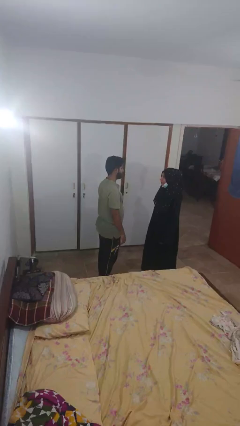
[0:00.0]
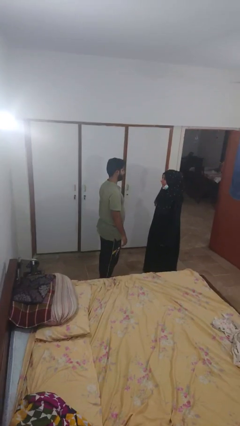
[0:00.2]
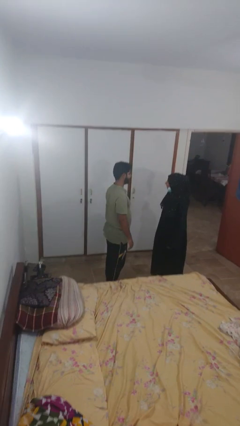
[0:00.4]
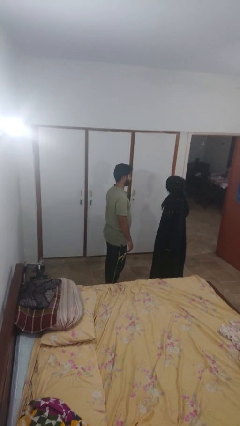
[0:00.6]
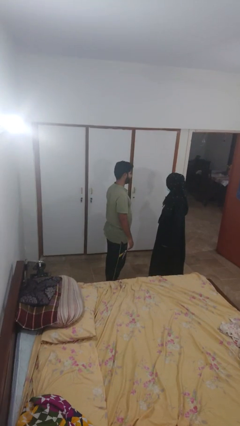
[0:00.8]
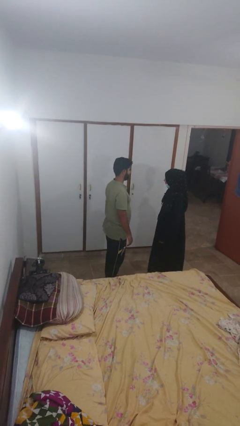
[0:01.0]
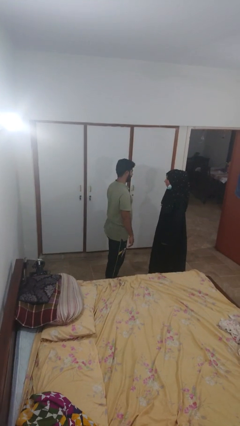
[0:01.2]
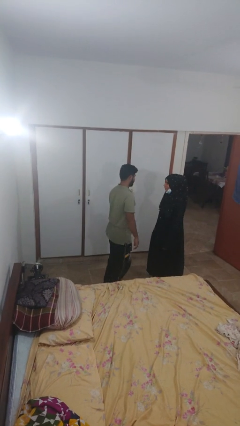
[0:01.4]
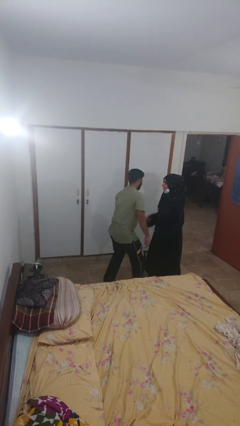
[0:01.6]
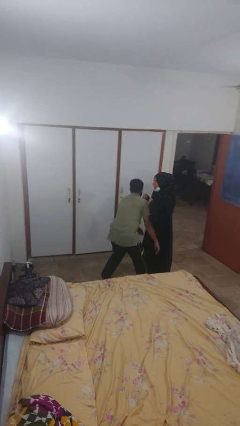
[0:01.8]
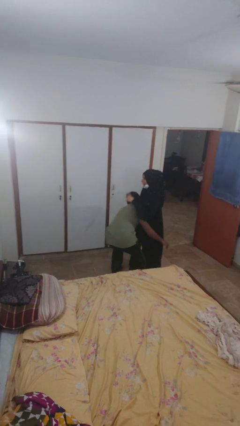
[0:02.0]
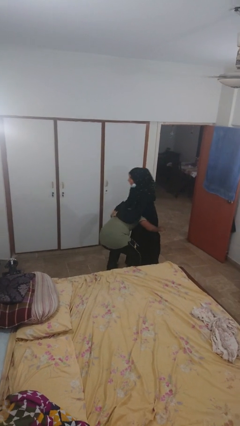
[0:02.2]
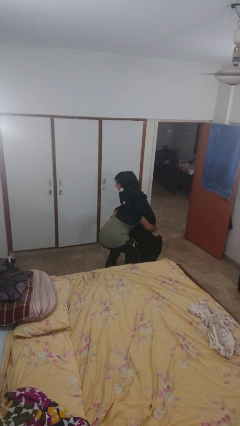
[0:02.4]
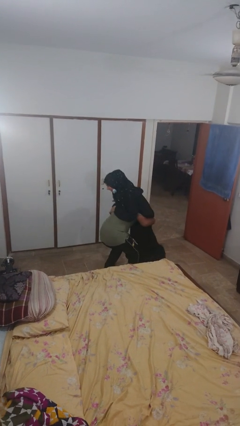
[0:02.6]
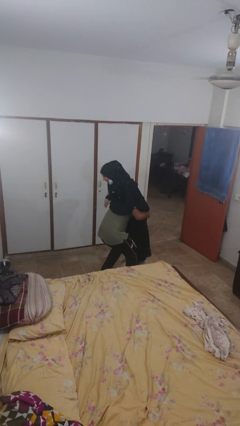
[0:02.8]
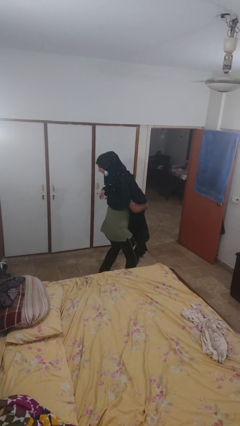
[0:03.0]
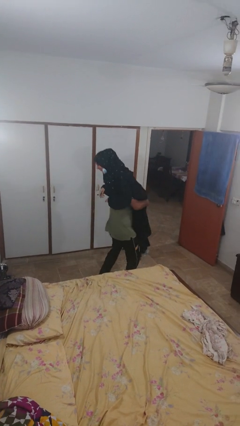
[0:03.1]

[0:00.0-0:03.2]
person carries person over shoulder

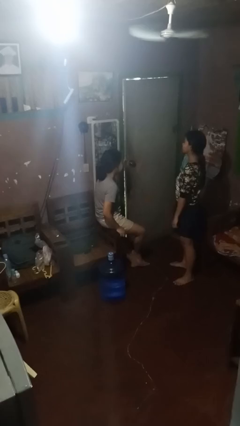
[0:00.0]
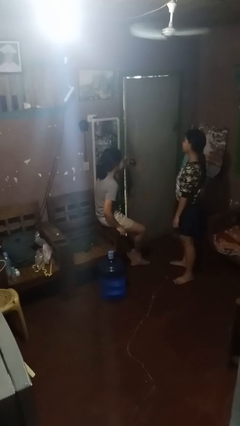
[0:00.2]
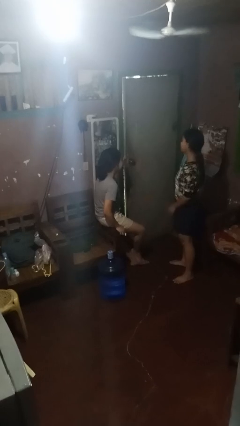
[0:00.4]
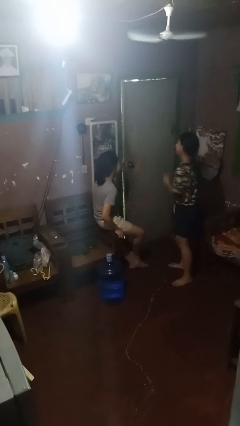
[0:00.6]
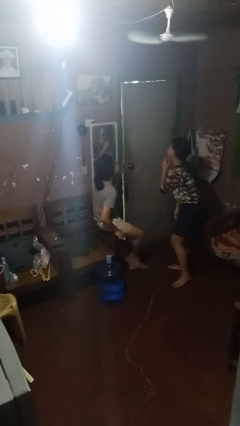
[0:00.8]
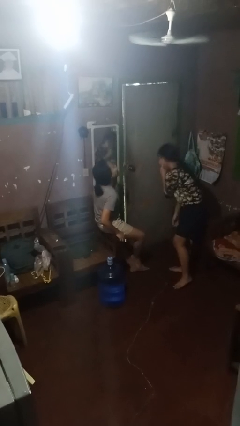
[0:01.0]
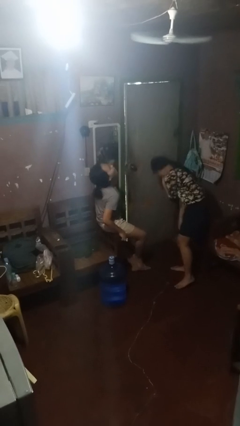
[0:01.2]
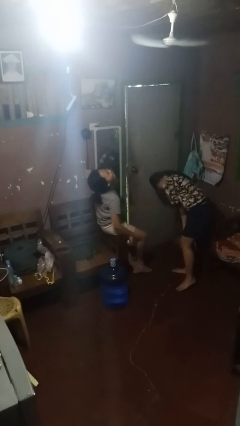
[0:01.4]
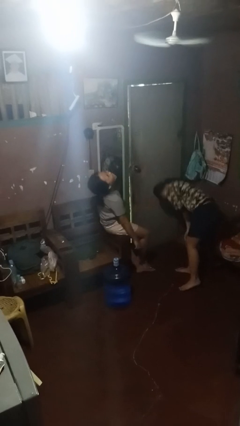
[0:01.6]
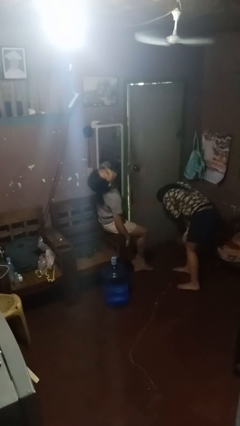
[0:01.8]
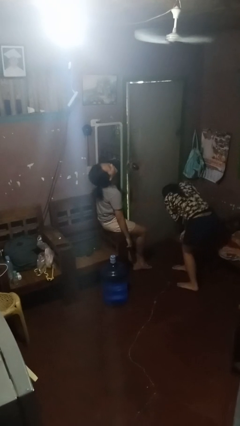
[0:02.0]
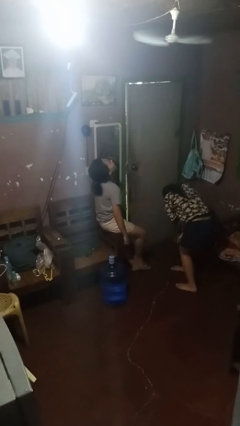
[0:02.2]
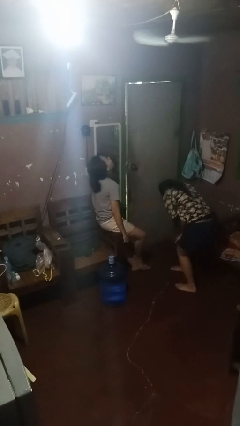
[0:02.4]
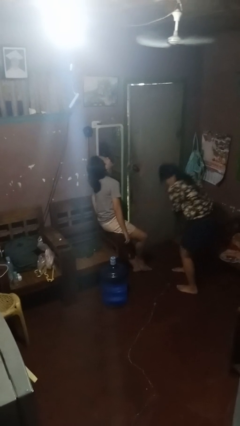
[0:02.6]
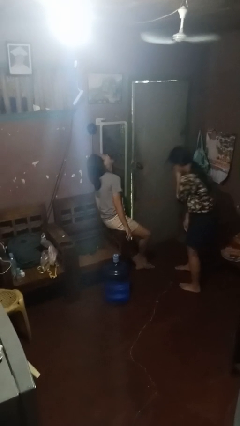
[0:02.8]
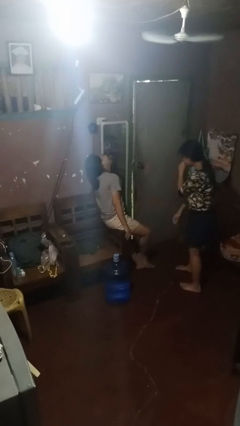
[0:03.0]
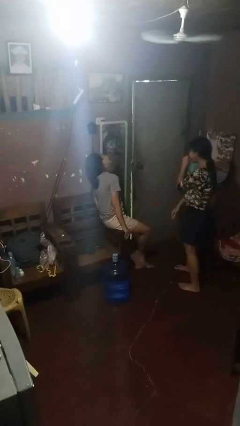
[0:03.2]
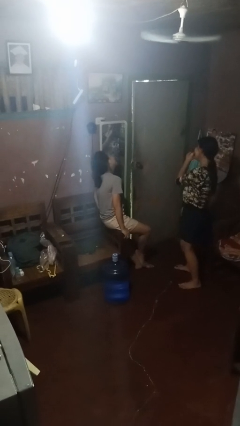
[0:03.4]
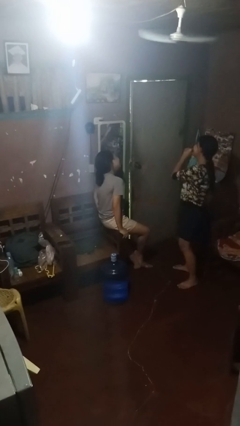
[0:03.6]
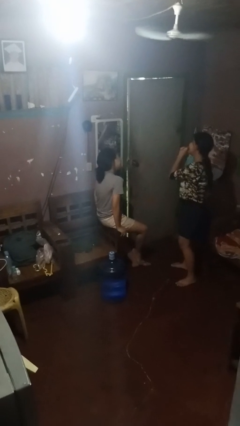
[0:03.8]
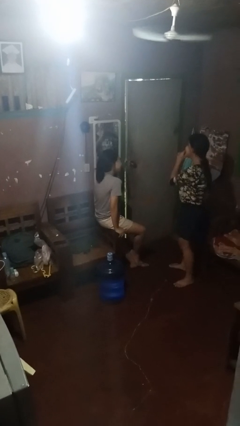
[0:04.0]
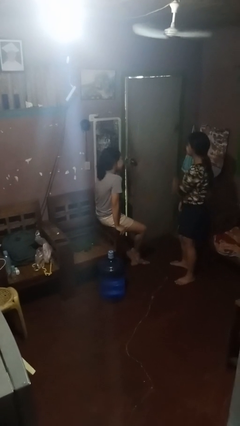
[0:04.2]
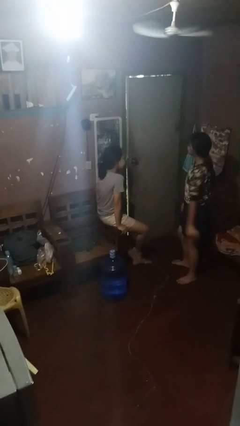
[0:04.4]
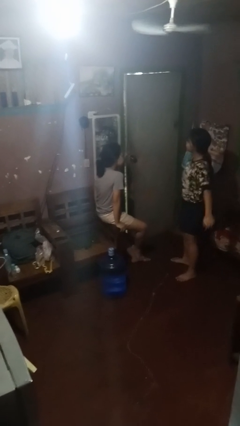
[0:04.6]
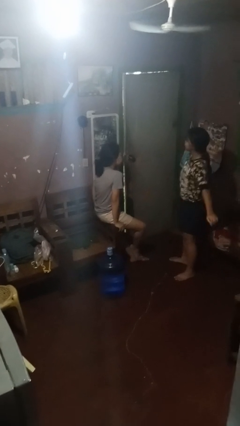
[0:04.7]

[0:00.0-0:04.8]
person laughs with person

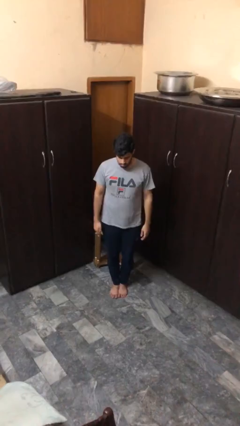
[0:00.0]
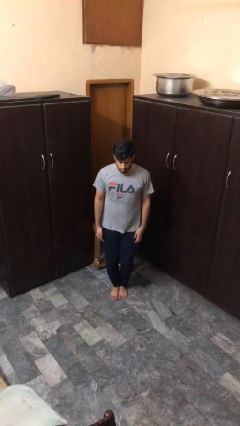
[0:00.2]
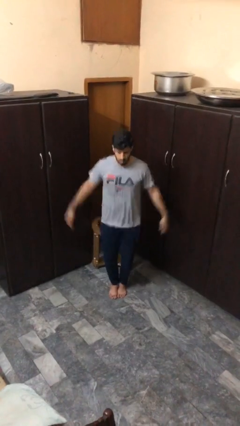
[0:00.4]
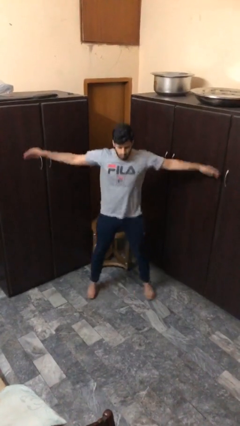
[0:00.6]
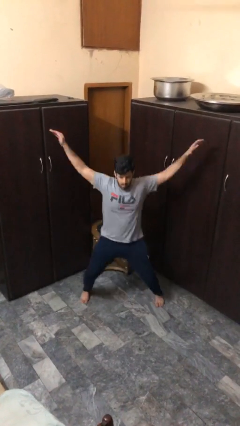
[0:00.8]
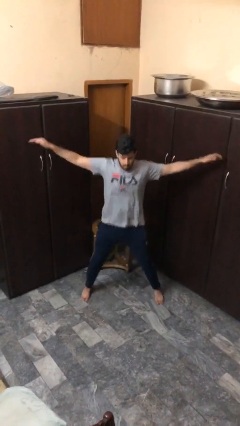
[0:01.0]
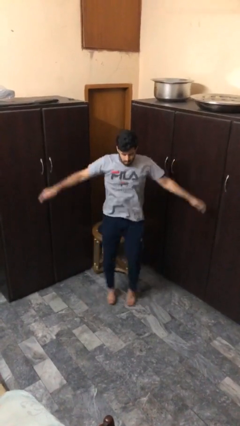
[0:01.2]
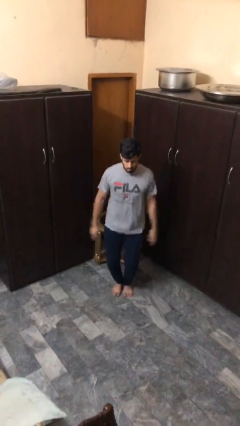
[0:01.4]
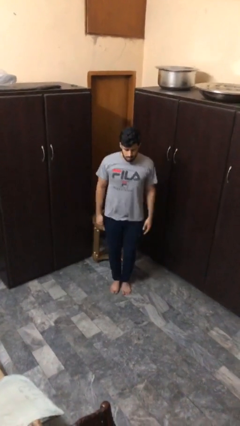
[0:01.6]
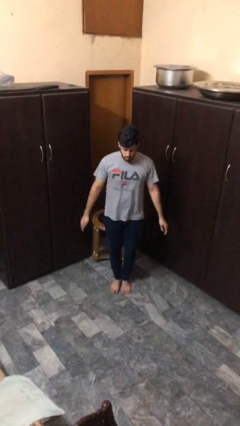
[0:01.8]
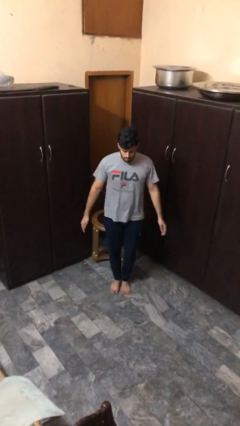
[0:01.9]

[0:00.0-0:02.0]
person exercises with jumping jacks

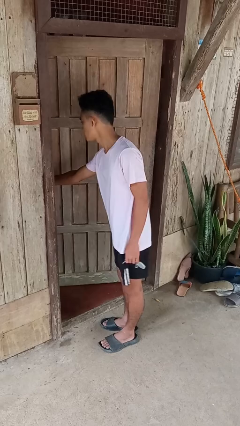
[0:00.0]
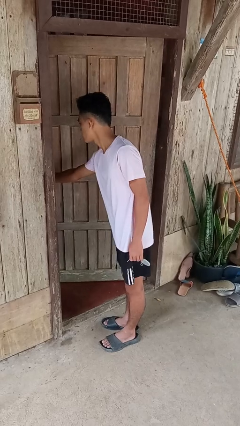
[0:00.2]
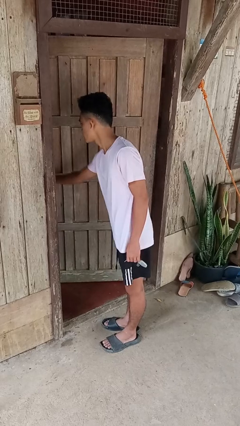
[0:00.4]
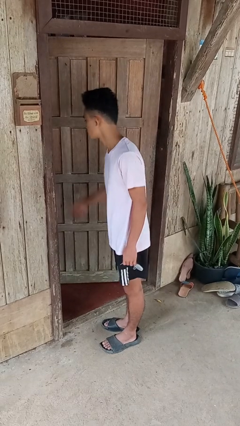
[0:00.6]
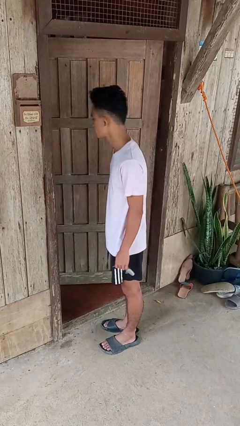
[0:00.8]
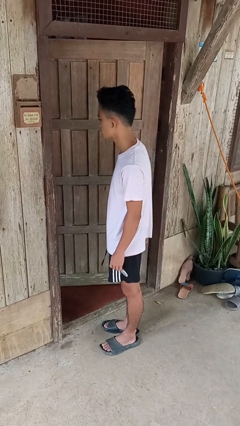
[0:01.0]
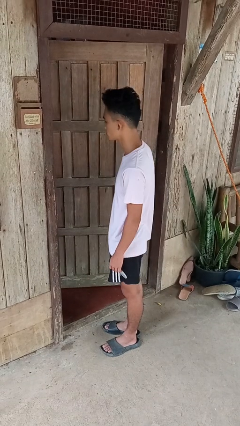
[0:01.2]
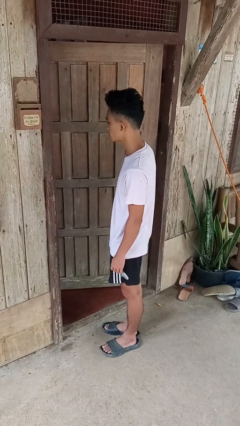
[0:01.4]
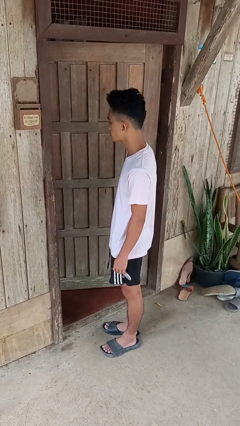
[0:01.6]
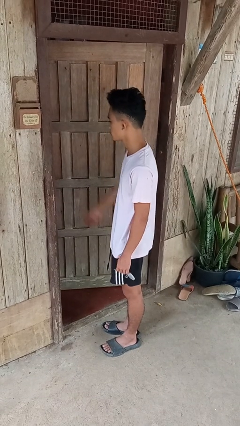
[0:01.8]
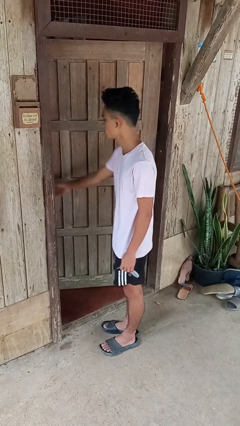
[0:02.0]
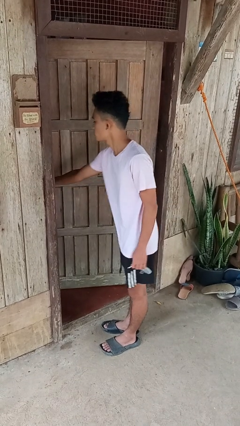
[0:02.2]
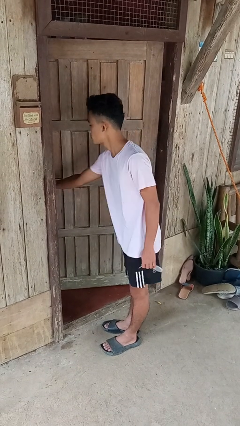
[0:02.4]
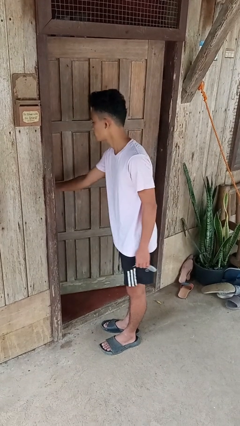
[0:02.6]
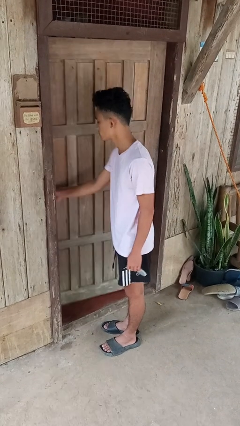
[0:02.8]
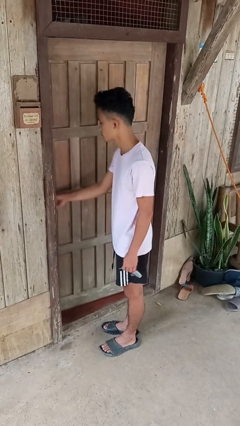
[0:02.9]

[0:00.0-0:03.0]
person opens facility door

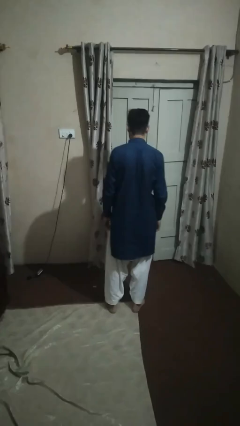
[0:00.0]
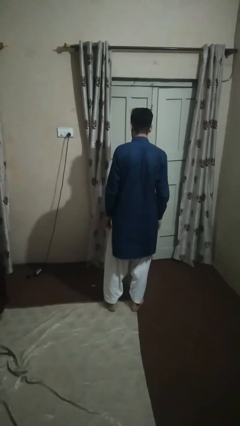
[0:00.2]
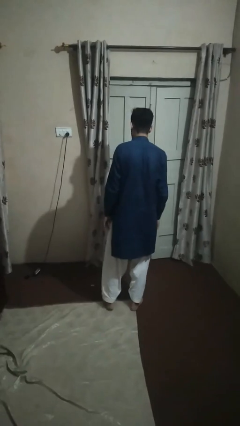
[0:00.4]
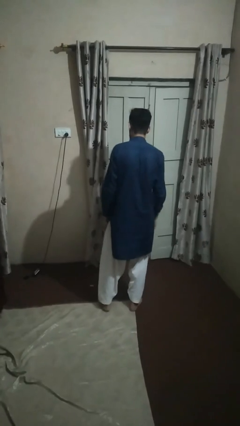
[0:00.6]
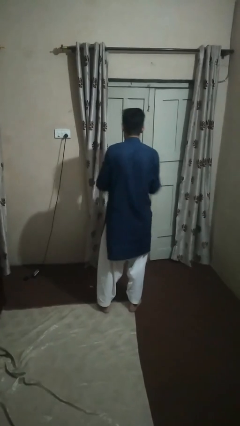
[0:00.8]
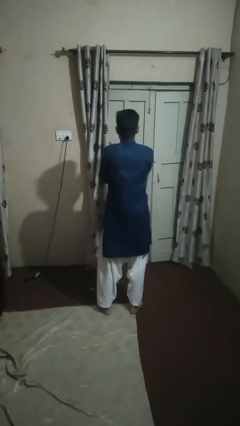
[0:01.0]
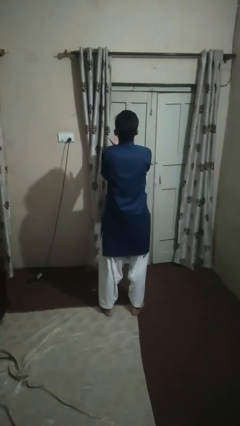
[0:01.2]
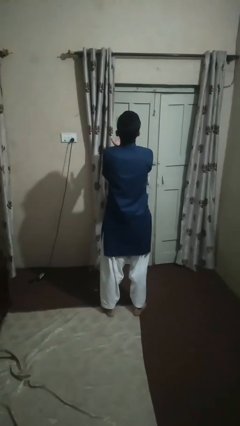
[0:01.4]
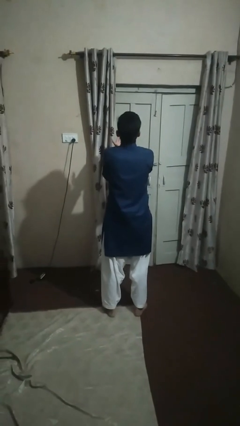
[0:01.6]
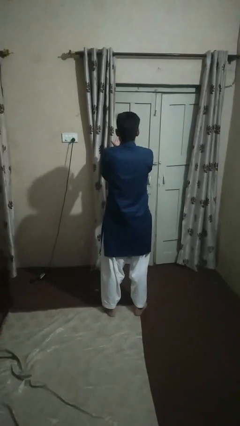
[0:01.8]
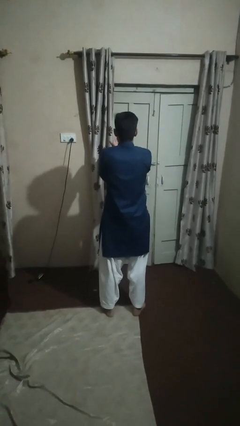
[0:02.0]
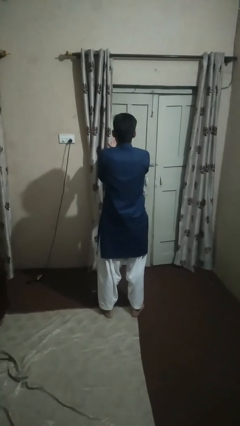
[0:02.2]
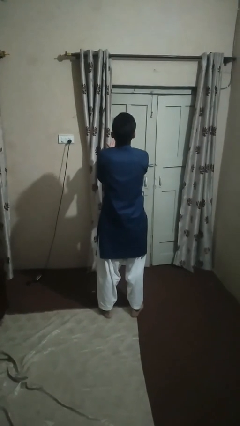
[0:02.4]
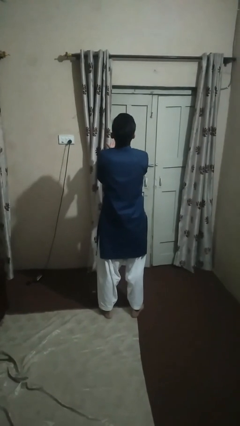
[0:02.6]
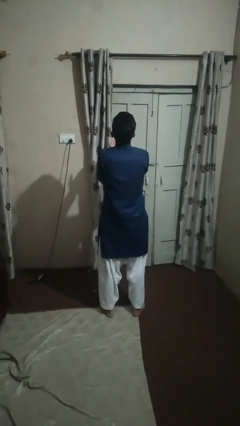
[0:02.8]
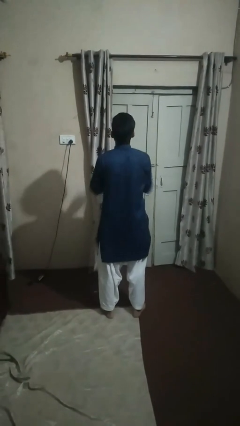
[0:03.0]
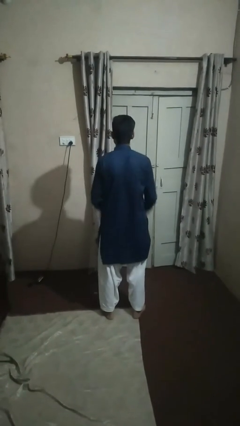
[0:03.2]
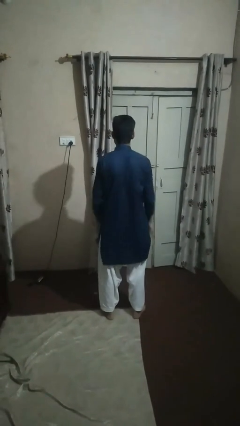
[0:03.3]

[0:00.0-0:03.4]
person prays

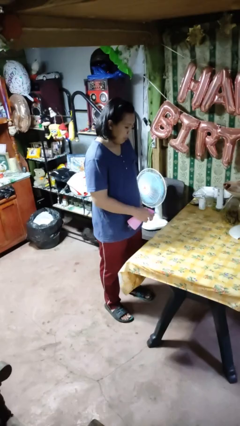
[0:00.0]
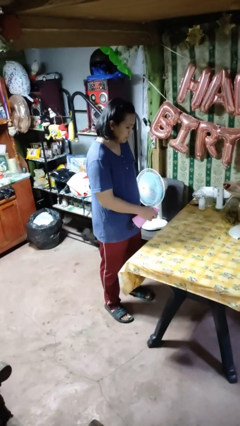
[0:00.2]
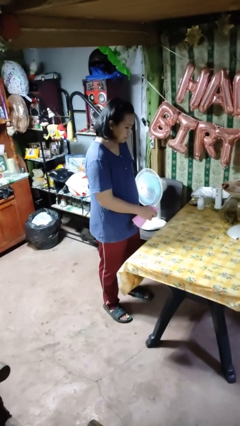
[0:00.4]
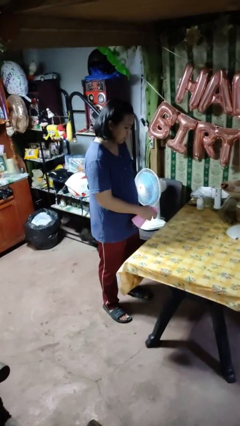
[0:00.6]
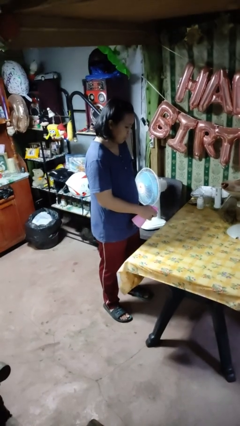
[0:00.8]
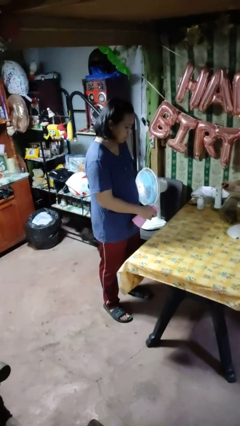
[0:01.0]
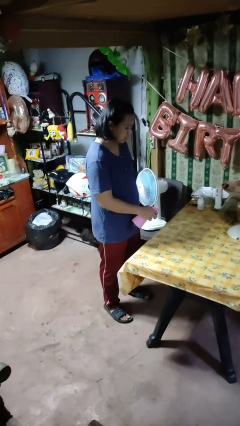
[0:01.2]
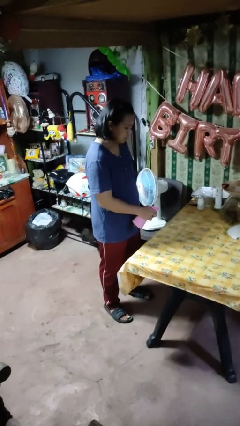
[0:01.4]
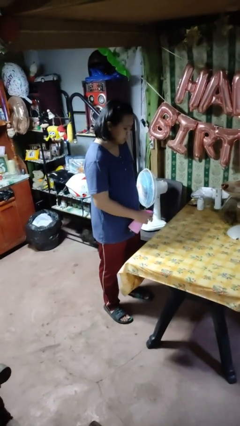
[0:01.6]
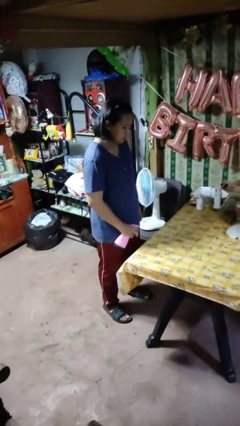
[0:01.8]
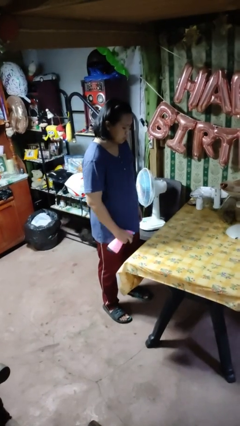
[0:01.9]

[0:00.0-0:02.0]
person sprays from bottle
